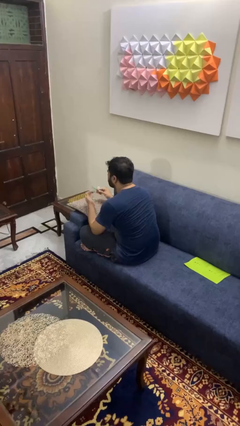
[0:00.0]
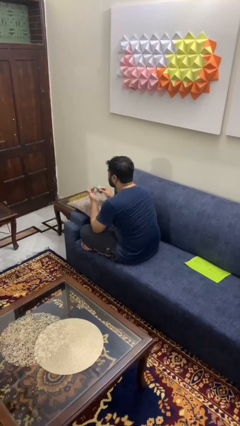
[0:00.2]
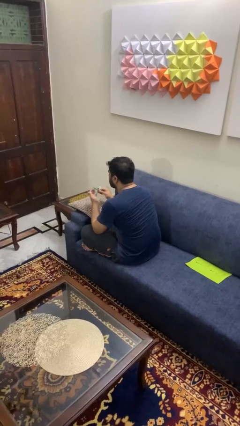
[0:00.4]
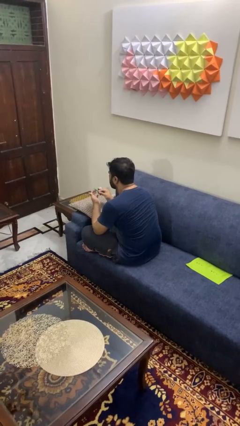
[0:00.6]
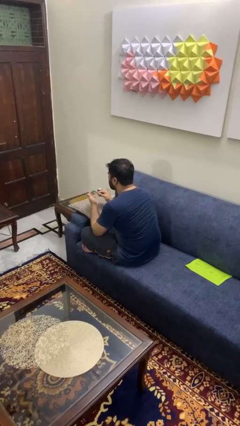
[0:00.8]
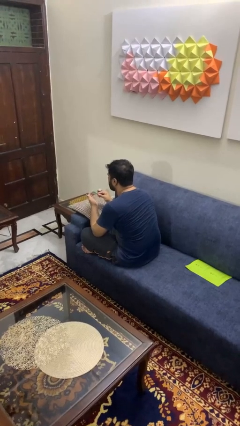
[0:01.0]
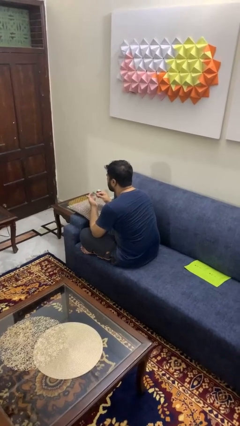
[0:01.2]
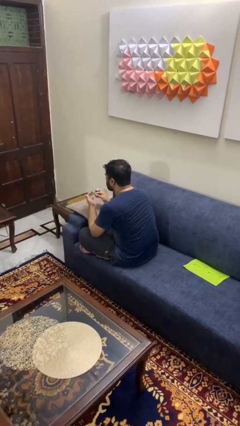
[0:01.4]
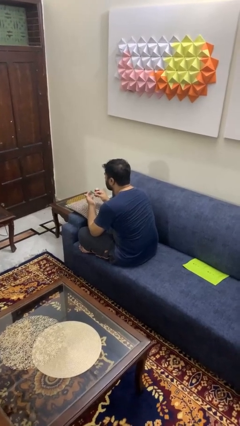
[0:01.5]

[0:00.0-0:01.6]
person files fingernails

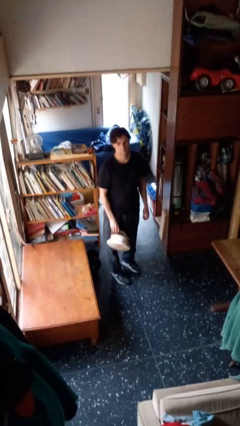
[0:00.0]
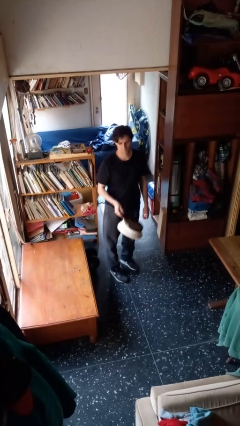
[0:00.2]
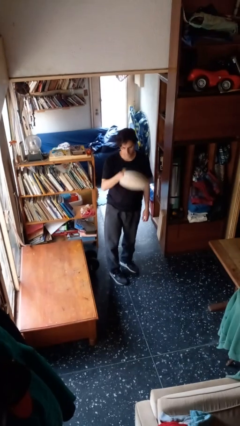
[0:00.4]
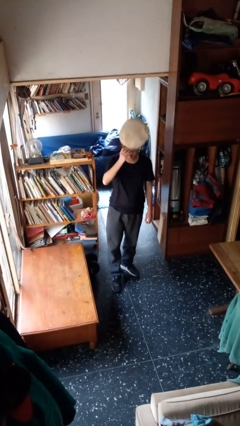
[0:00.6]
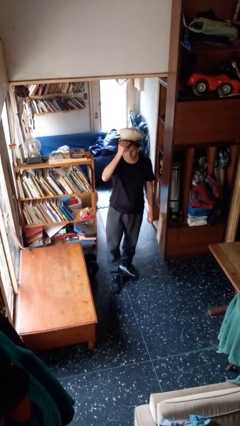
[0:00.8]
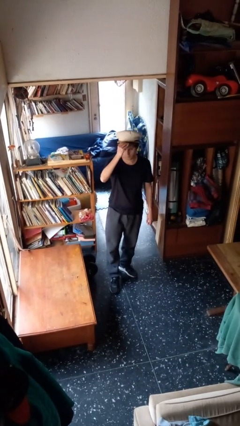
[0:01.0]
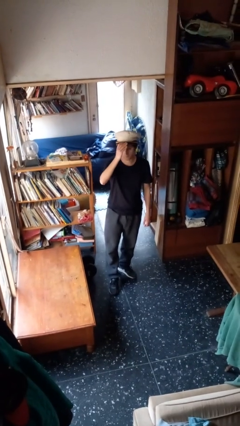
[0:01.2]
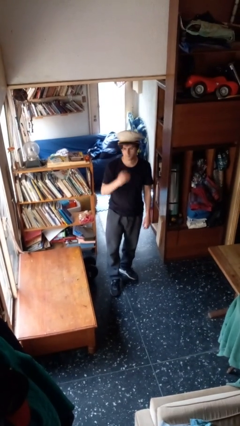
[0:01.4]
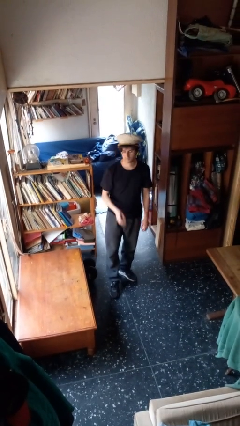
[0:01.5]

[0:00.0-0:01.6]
person puts on hat

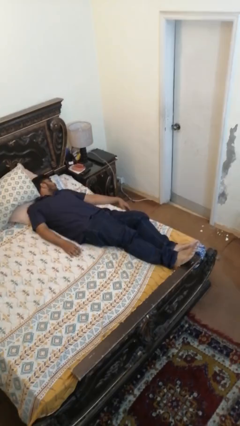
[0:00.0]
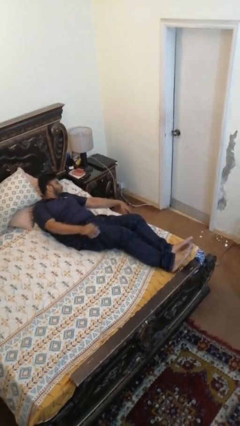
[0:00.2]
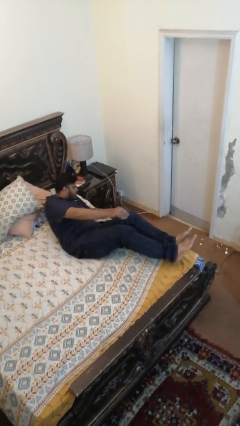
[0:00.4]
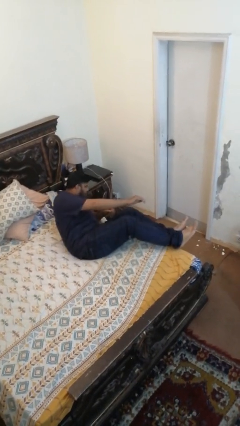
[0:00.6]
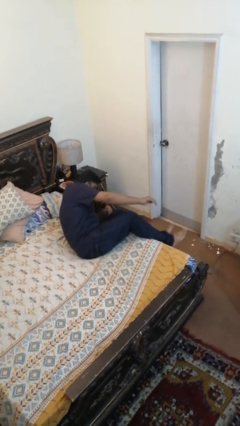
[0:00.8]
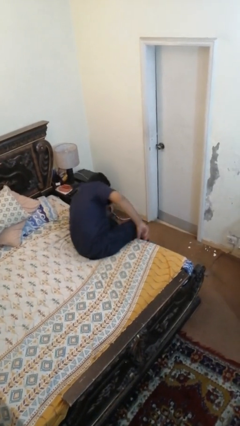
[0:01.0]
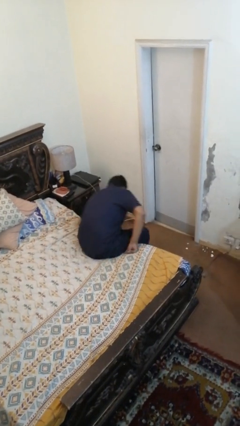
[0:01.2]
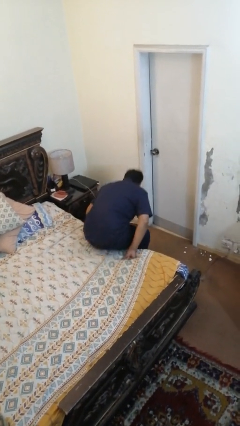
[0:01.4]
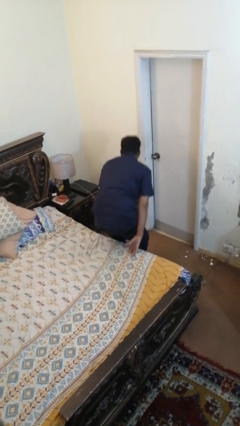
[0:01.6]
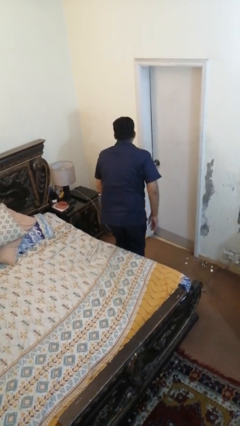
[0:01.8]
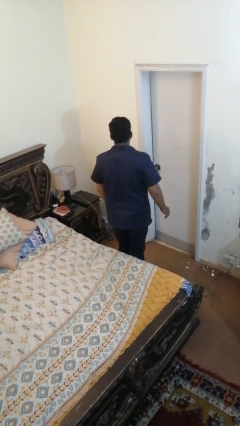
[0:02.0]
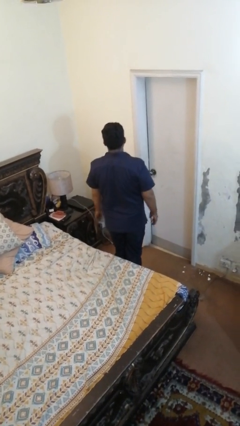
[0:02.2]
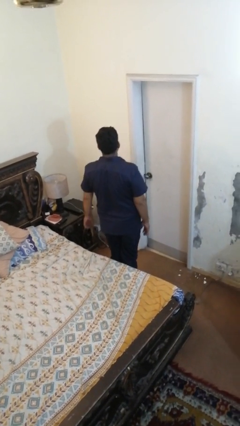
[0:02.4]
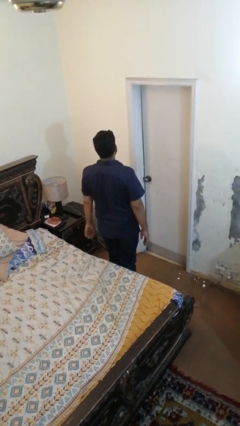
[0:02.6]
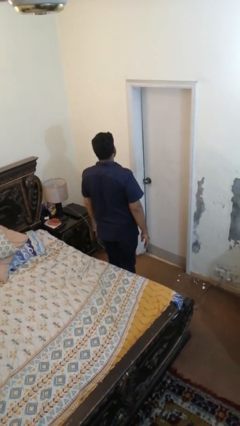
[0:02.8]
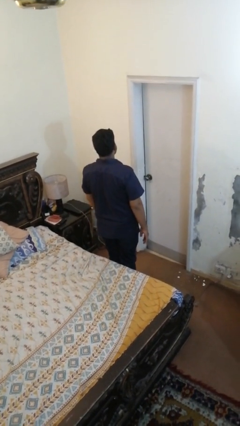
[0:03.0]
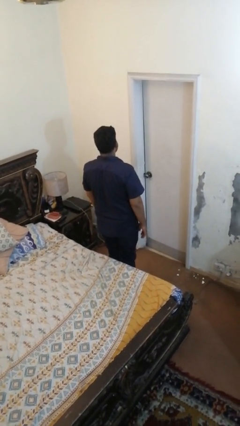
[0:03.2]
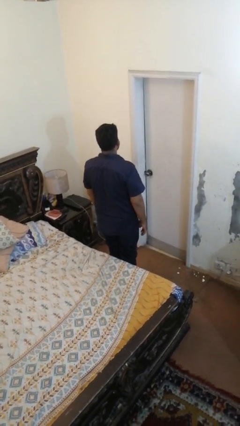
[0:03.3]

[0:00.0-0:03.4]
person stands up

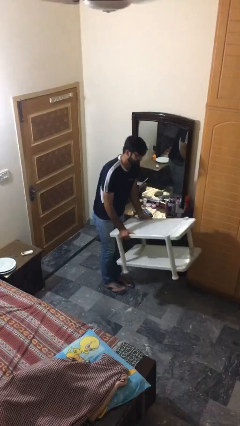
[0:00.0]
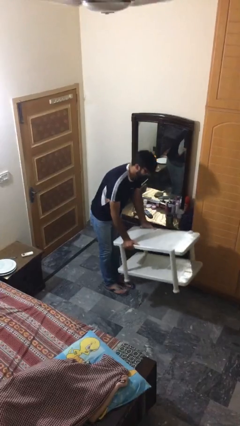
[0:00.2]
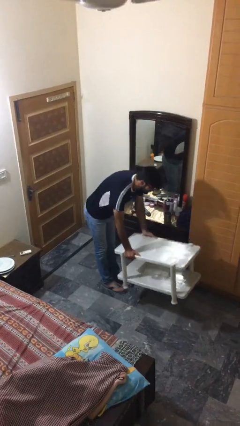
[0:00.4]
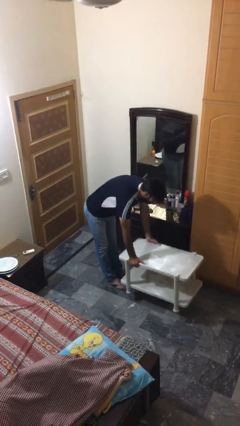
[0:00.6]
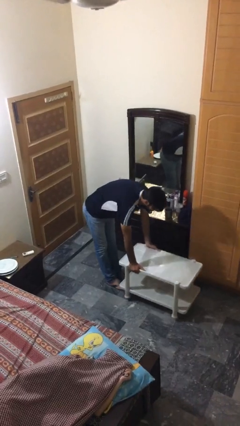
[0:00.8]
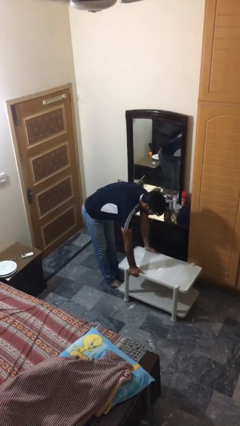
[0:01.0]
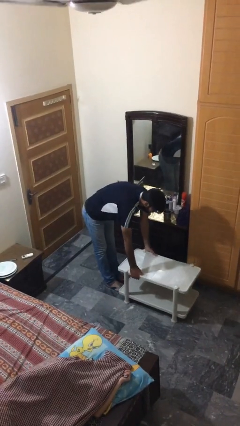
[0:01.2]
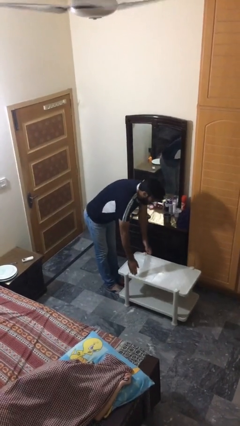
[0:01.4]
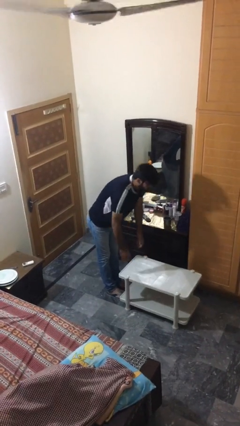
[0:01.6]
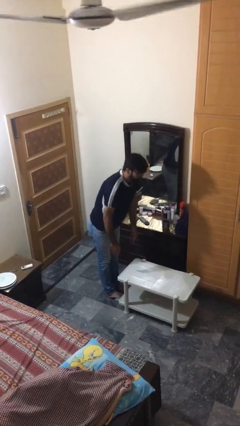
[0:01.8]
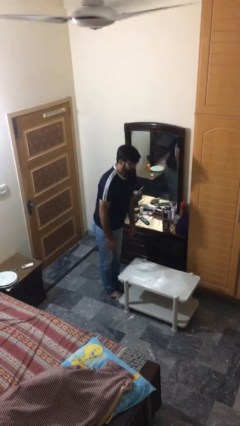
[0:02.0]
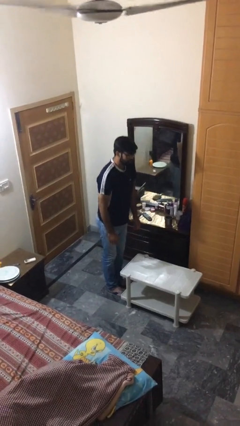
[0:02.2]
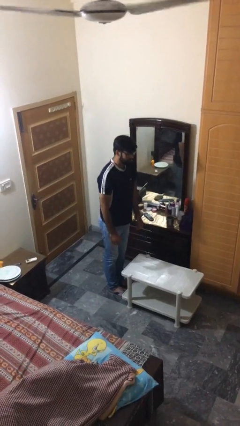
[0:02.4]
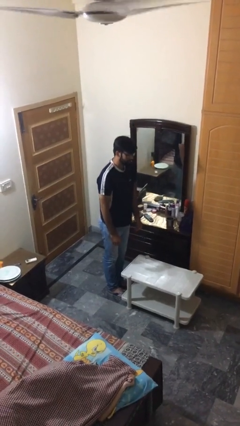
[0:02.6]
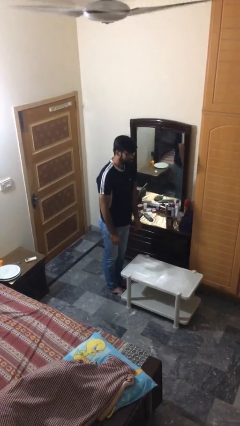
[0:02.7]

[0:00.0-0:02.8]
person puts down object on floor

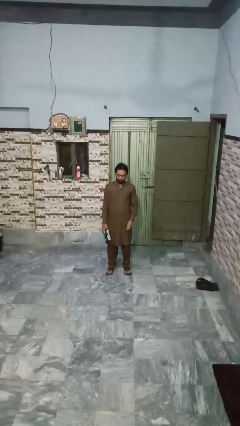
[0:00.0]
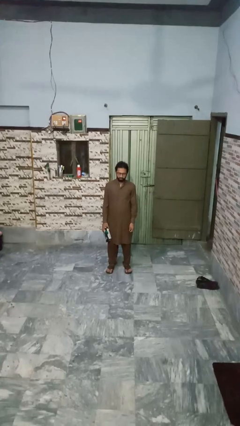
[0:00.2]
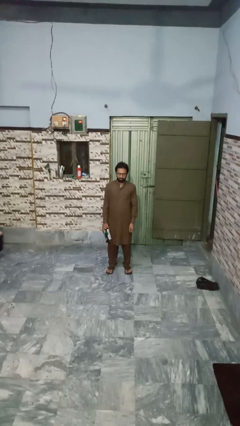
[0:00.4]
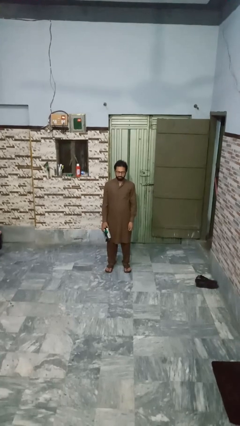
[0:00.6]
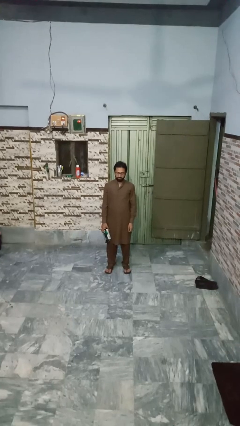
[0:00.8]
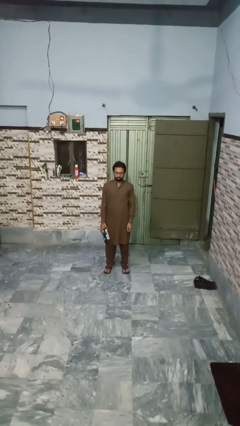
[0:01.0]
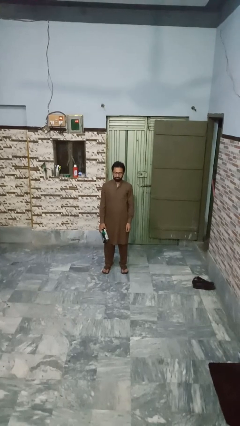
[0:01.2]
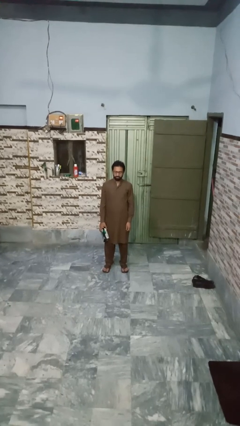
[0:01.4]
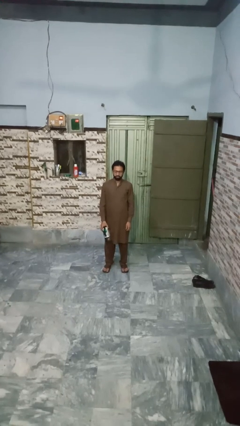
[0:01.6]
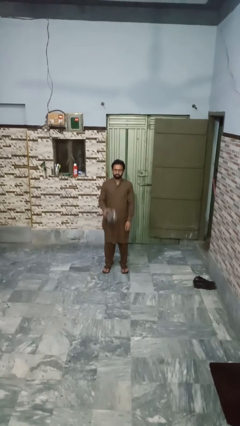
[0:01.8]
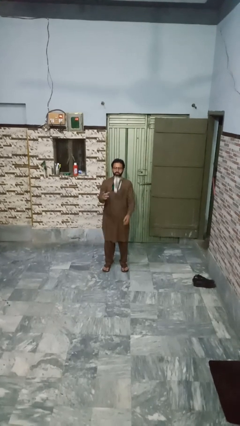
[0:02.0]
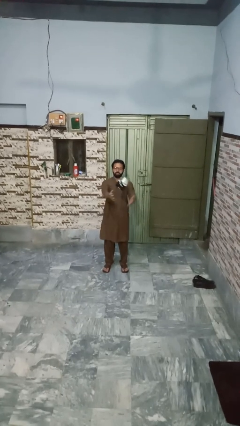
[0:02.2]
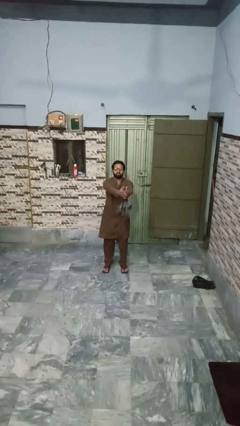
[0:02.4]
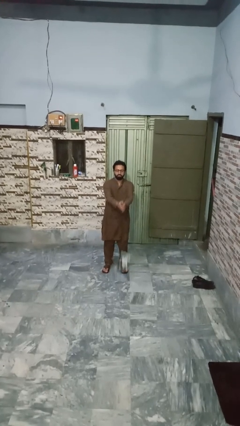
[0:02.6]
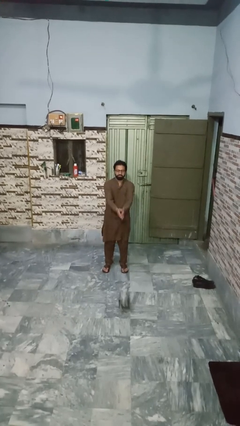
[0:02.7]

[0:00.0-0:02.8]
person drops object

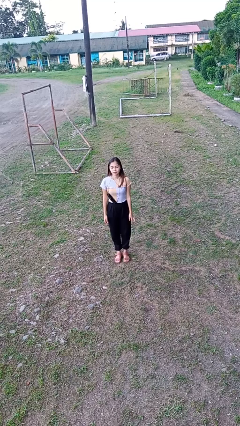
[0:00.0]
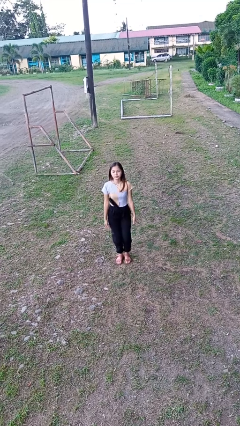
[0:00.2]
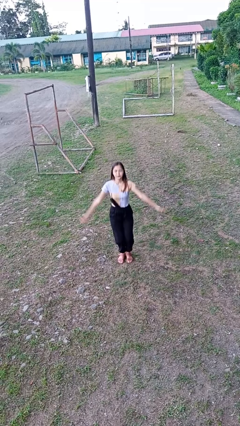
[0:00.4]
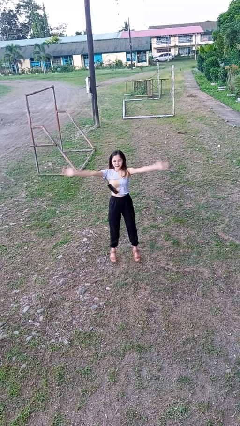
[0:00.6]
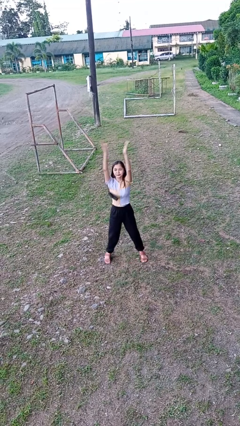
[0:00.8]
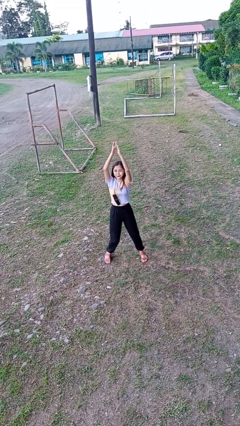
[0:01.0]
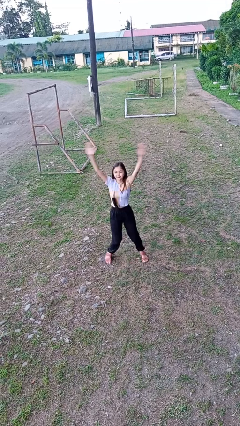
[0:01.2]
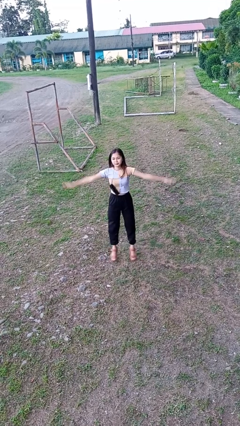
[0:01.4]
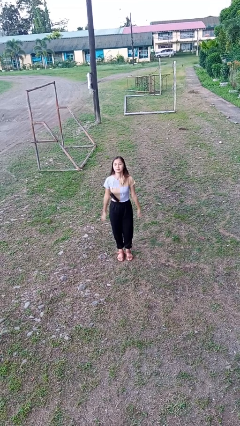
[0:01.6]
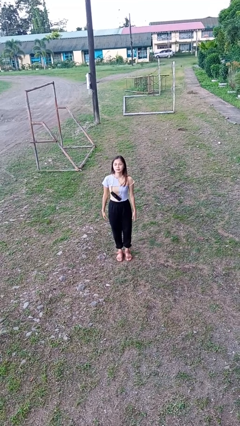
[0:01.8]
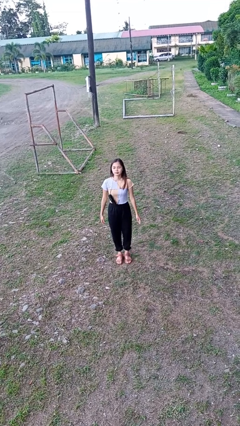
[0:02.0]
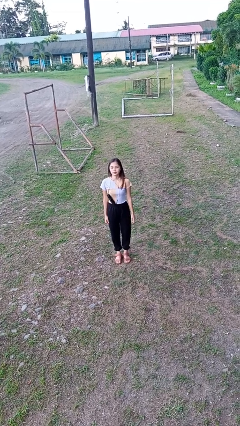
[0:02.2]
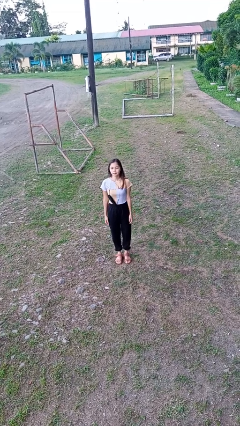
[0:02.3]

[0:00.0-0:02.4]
person exercises with jumping jacks

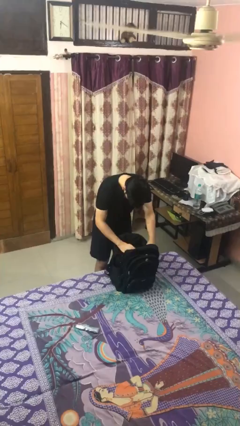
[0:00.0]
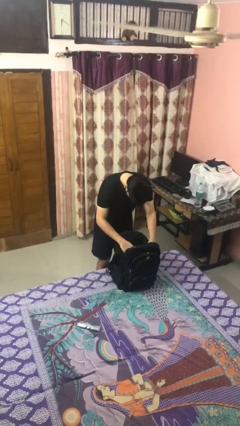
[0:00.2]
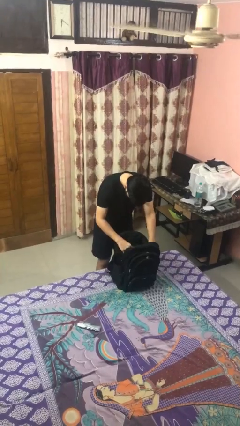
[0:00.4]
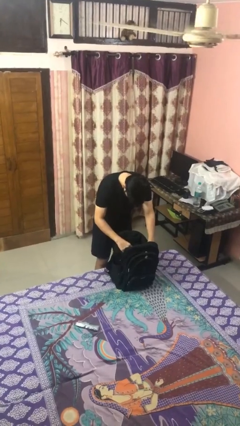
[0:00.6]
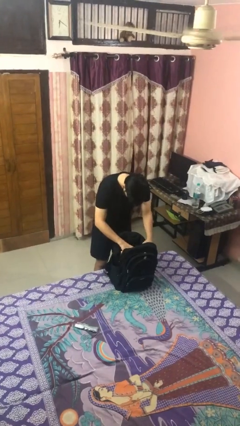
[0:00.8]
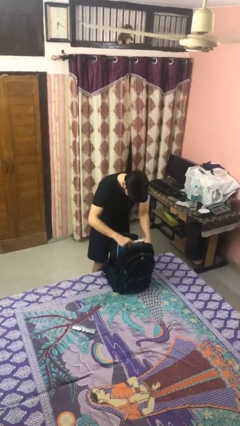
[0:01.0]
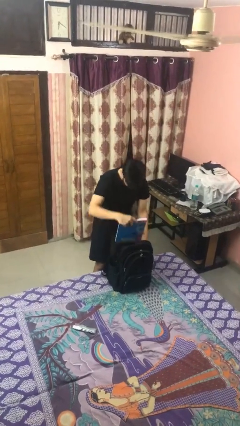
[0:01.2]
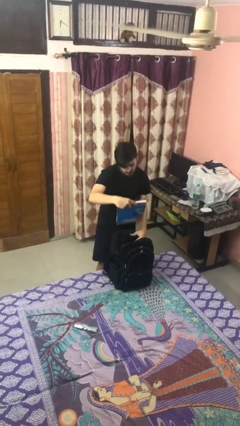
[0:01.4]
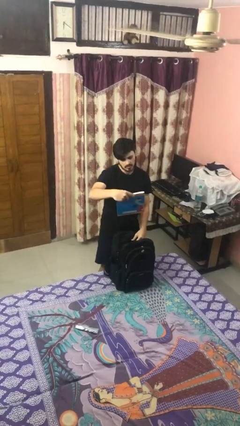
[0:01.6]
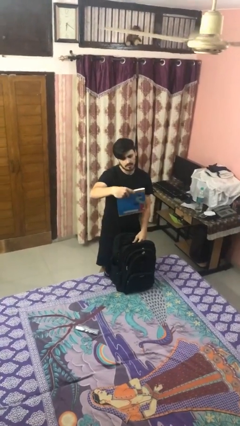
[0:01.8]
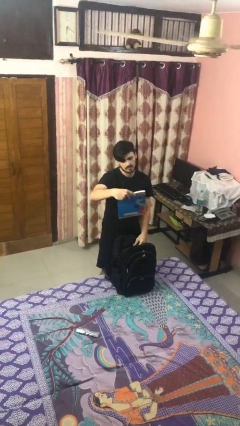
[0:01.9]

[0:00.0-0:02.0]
person takes object from backpack

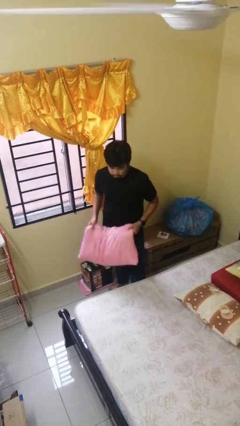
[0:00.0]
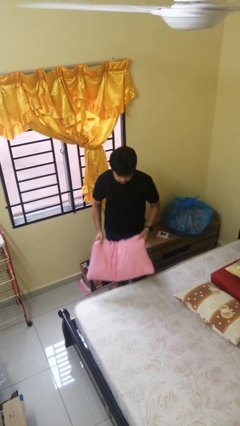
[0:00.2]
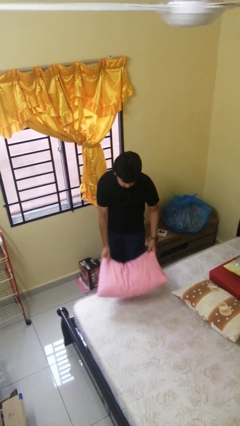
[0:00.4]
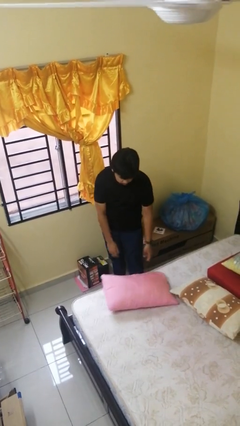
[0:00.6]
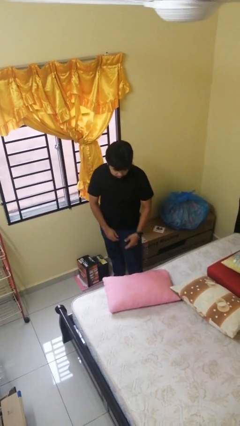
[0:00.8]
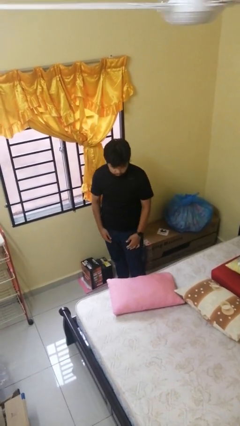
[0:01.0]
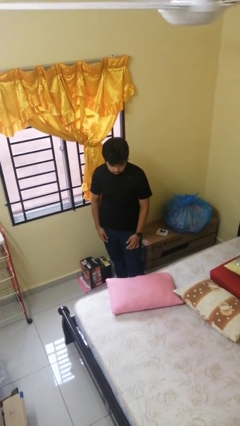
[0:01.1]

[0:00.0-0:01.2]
person puts down object on bed
